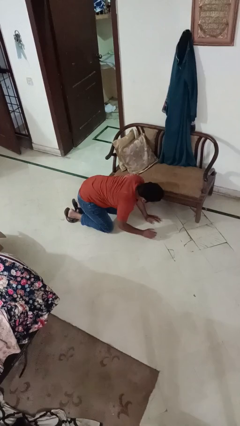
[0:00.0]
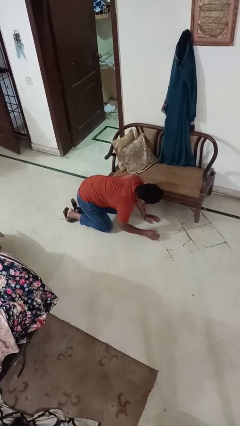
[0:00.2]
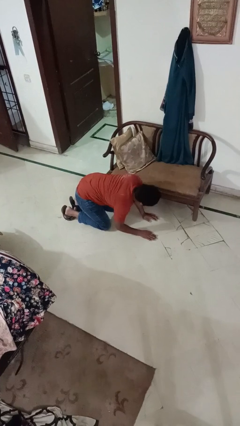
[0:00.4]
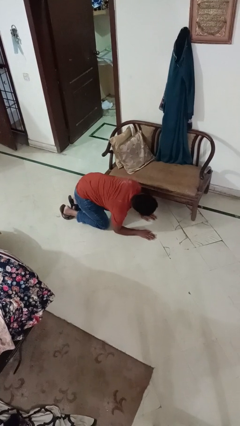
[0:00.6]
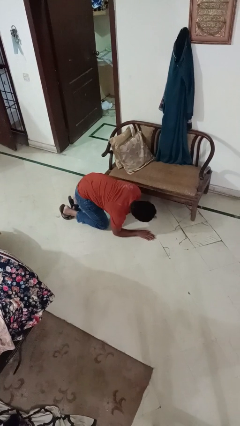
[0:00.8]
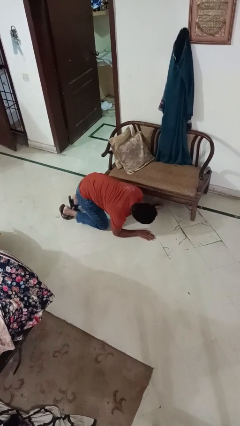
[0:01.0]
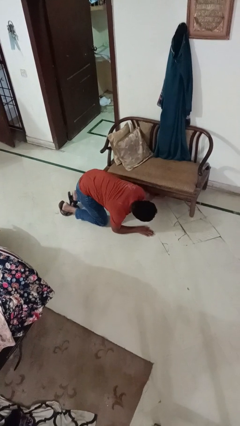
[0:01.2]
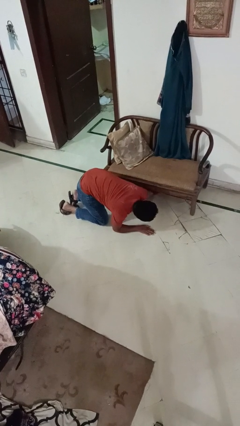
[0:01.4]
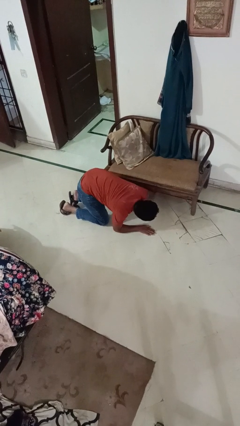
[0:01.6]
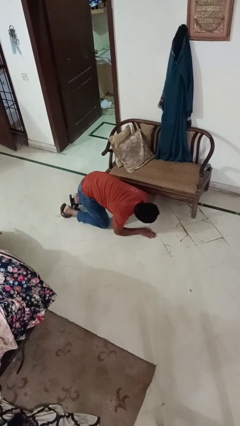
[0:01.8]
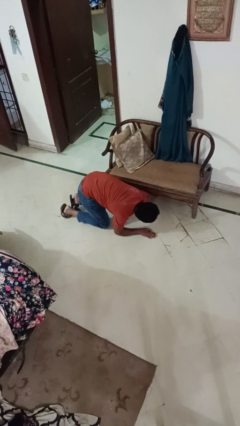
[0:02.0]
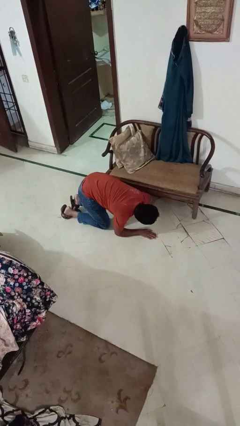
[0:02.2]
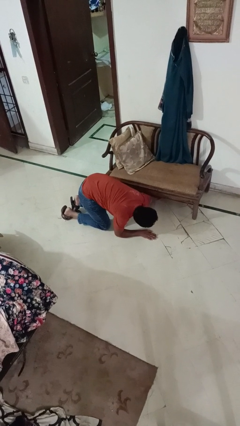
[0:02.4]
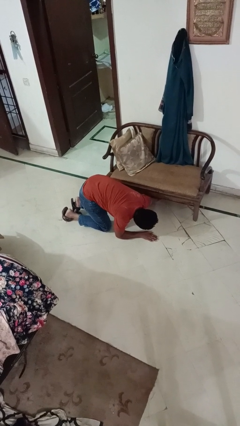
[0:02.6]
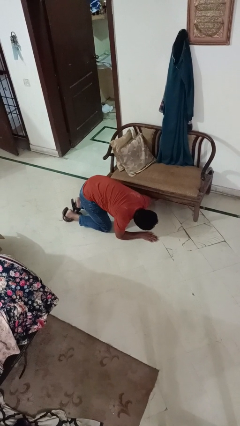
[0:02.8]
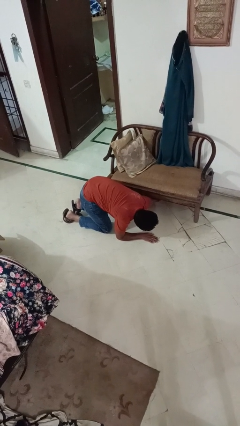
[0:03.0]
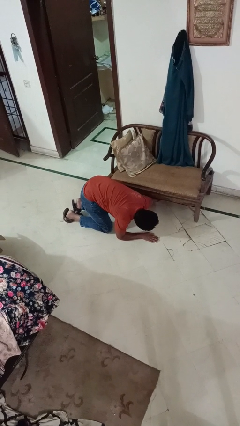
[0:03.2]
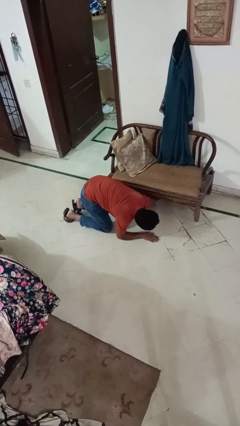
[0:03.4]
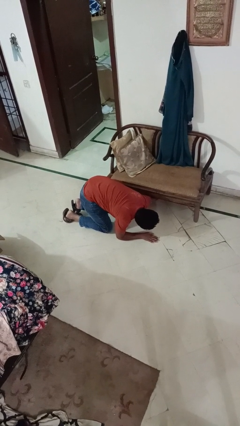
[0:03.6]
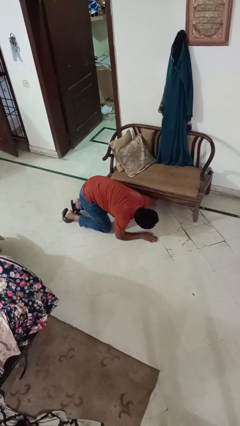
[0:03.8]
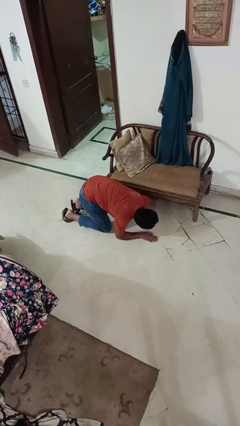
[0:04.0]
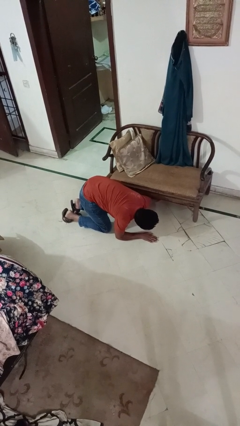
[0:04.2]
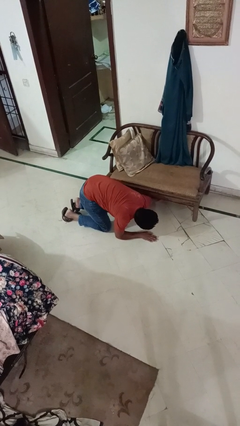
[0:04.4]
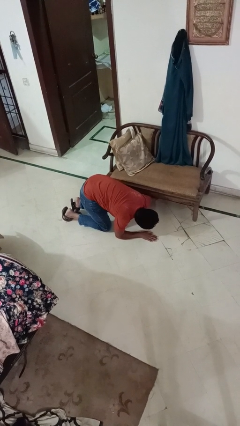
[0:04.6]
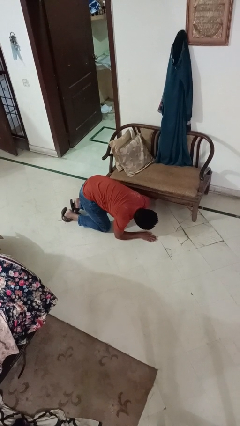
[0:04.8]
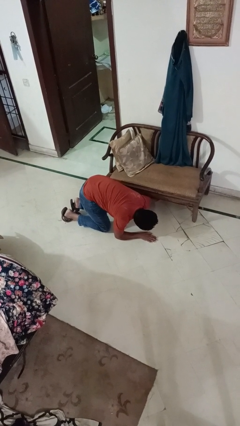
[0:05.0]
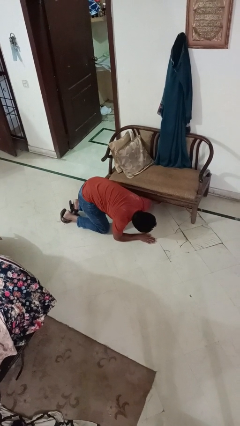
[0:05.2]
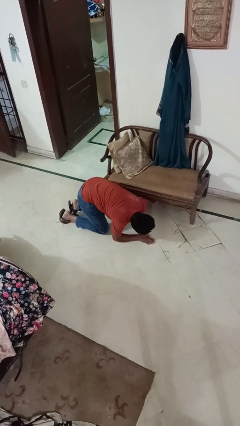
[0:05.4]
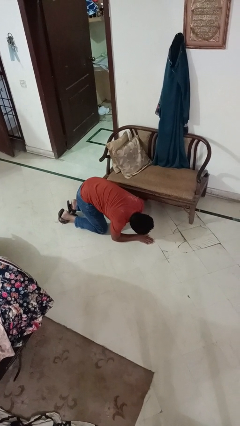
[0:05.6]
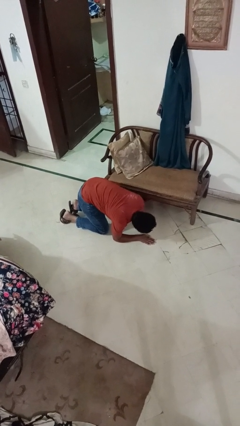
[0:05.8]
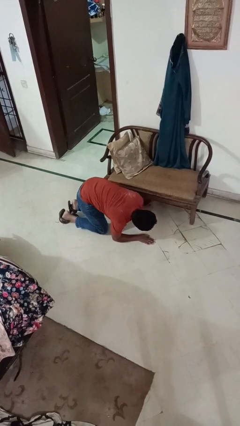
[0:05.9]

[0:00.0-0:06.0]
person searches under couch

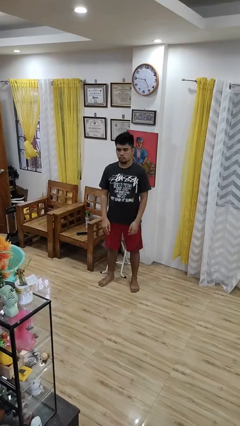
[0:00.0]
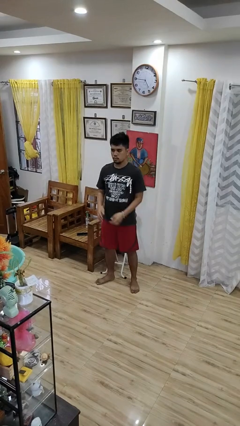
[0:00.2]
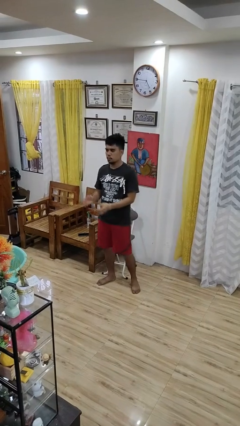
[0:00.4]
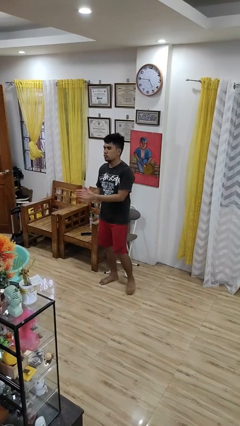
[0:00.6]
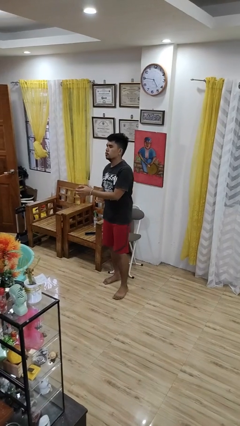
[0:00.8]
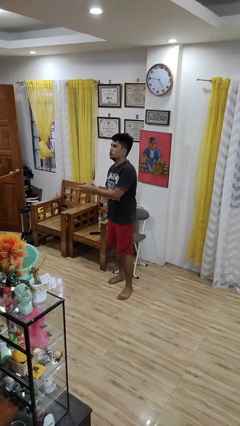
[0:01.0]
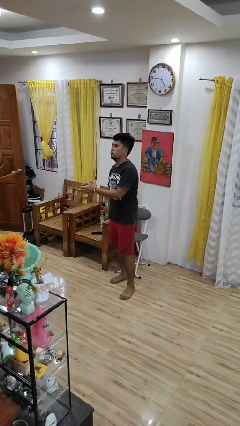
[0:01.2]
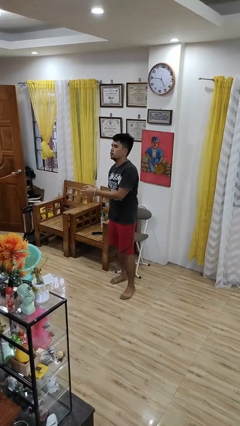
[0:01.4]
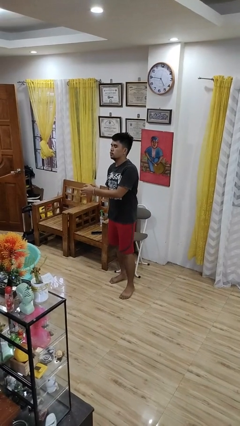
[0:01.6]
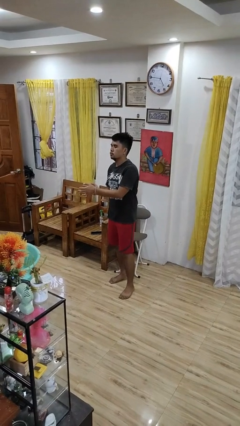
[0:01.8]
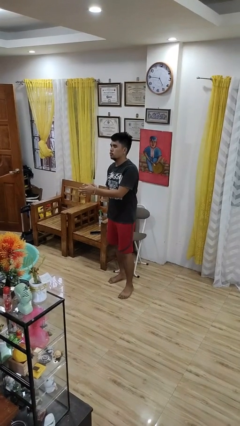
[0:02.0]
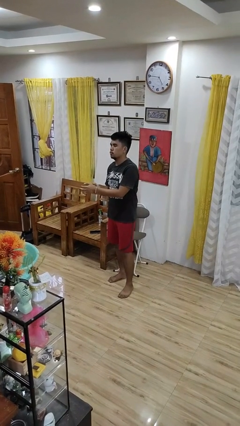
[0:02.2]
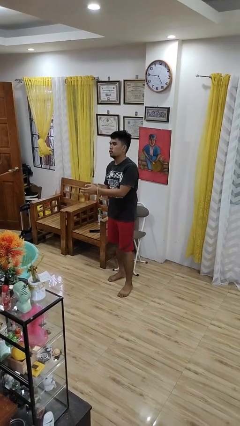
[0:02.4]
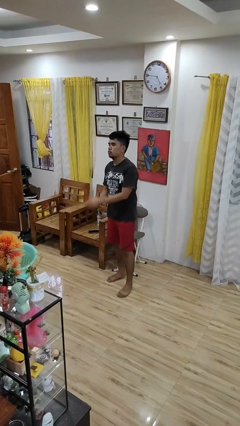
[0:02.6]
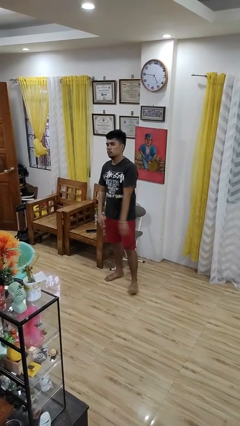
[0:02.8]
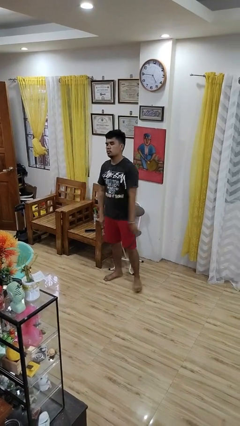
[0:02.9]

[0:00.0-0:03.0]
person claps hands

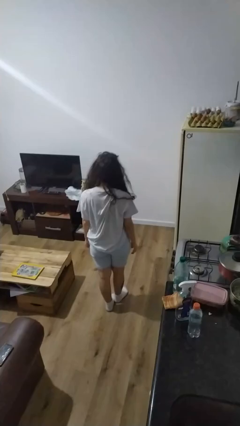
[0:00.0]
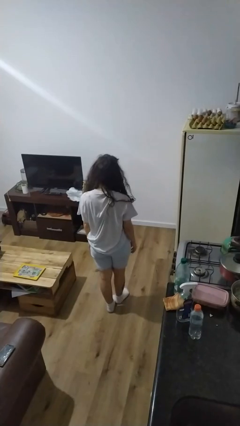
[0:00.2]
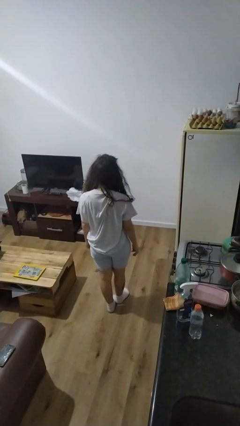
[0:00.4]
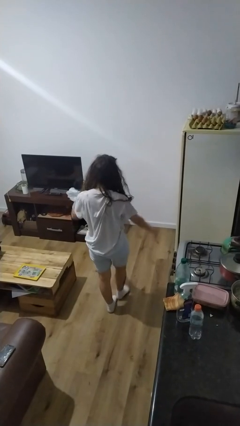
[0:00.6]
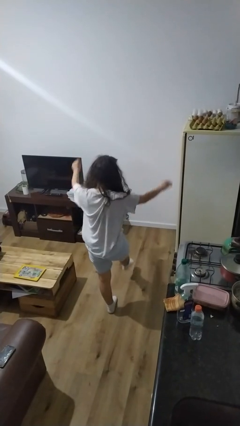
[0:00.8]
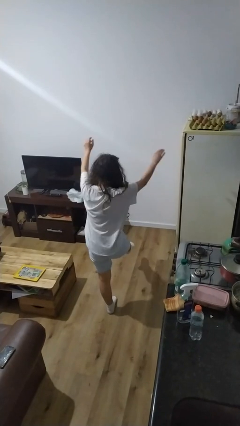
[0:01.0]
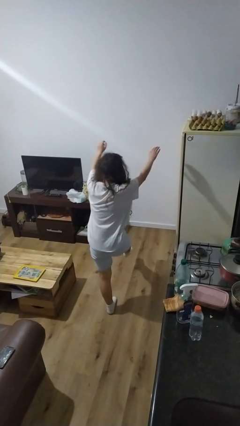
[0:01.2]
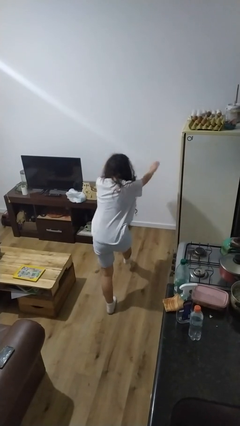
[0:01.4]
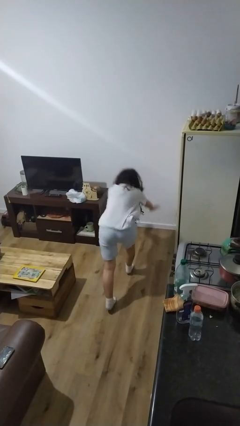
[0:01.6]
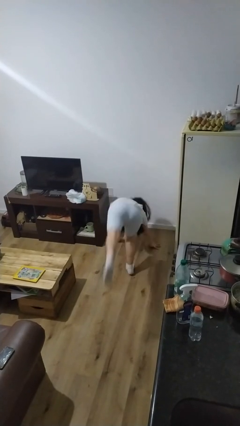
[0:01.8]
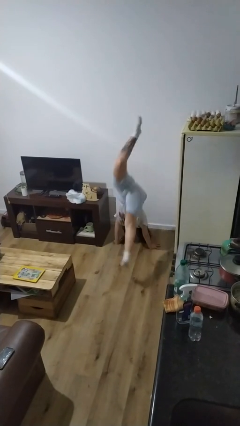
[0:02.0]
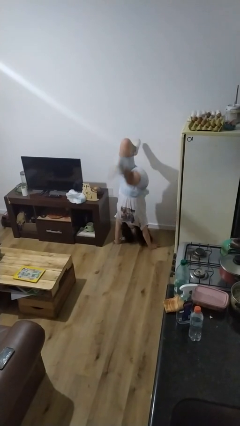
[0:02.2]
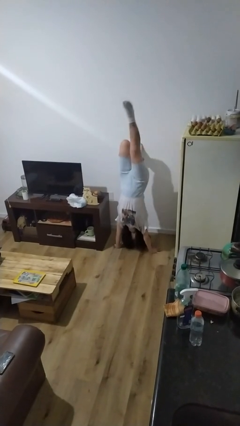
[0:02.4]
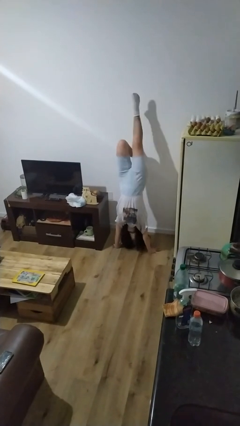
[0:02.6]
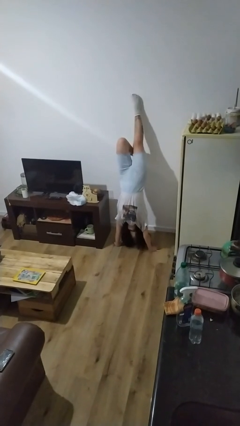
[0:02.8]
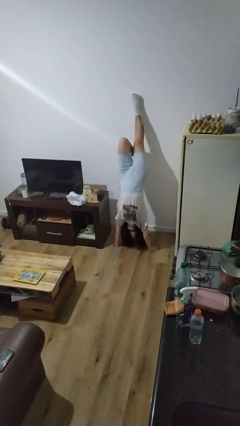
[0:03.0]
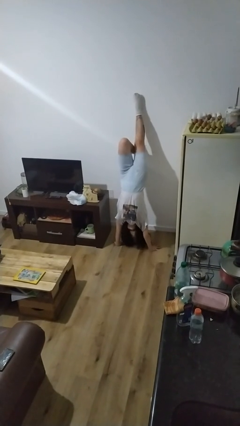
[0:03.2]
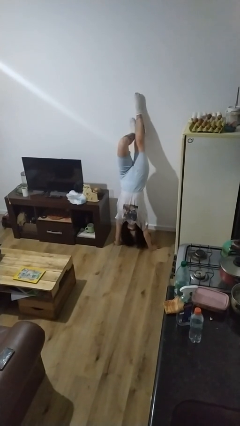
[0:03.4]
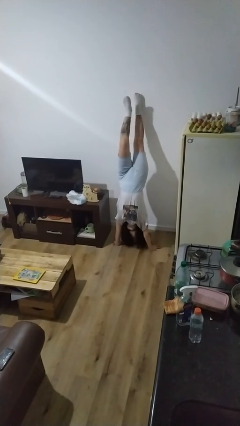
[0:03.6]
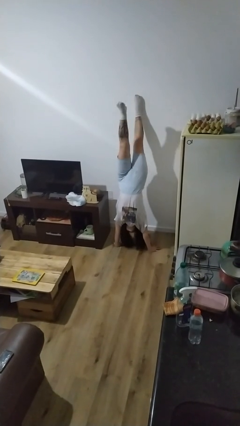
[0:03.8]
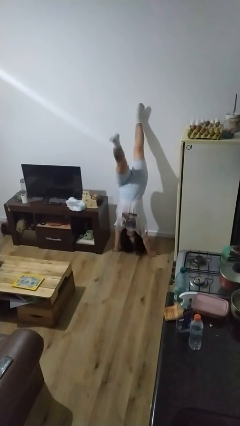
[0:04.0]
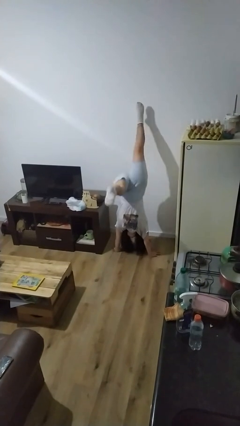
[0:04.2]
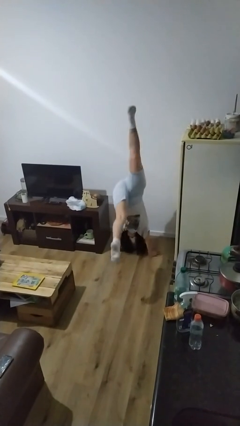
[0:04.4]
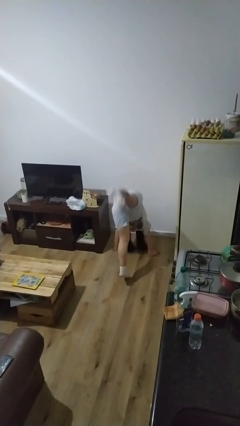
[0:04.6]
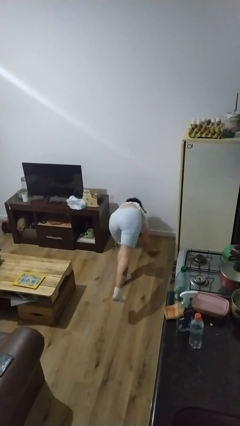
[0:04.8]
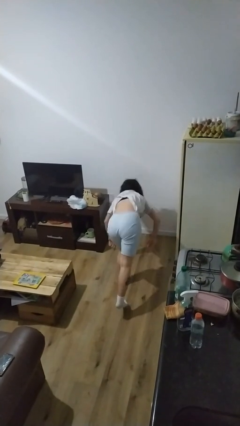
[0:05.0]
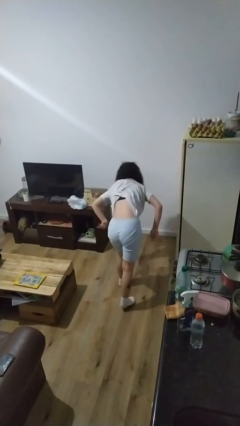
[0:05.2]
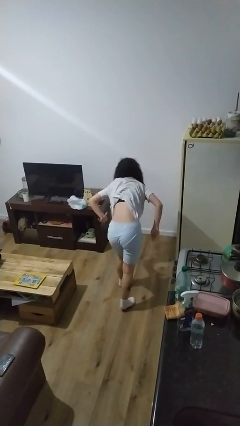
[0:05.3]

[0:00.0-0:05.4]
person handstand

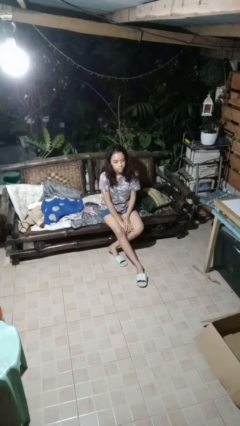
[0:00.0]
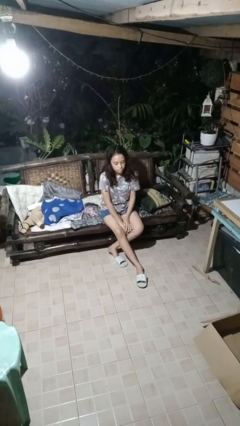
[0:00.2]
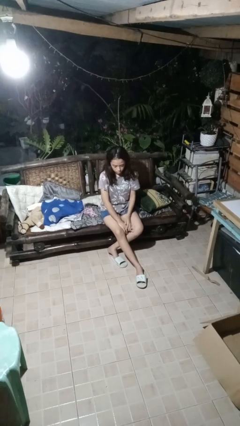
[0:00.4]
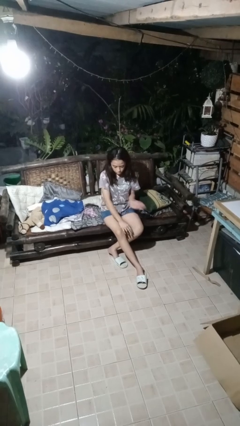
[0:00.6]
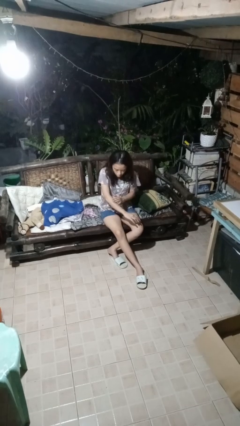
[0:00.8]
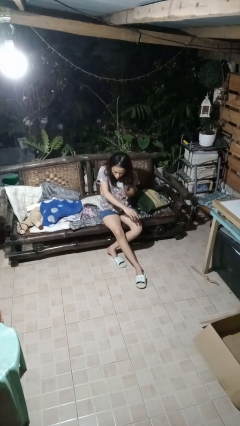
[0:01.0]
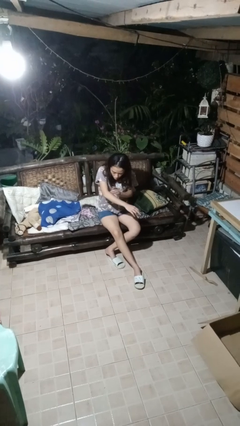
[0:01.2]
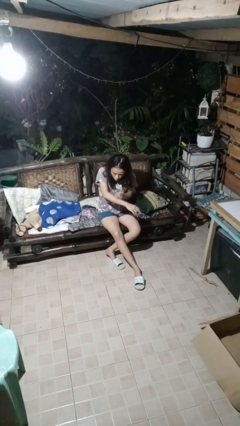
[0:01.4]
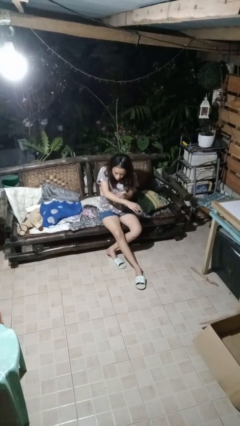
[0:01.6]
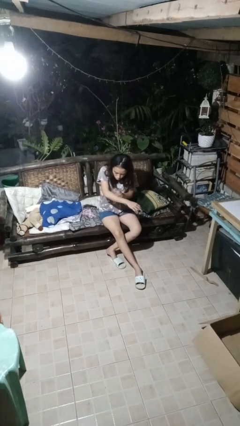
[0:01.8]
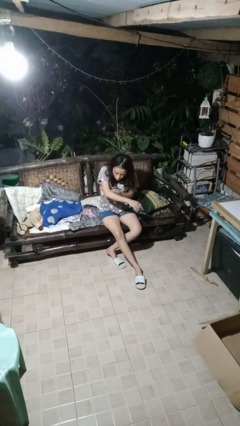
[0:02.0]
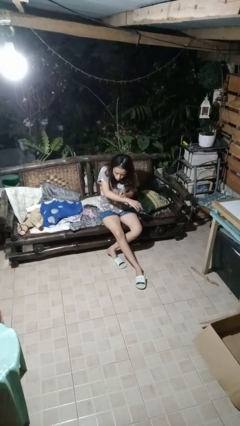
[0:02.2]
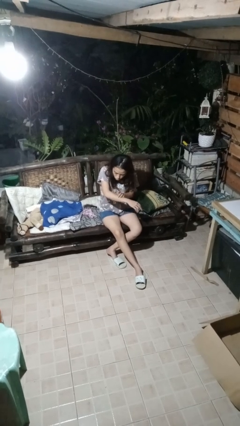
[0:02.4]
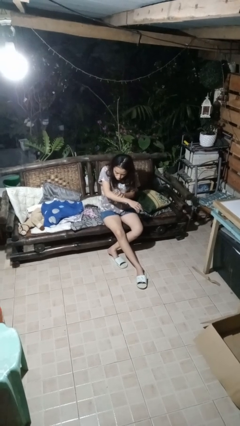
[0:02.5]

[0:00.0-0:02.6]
person swats bug

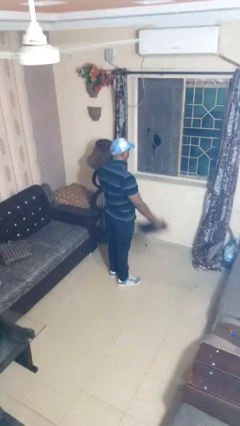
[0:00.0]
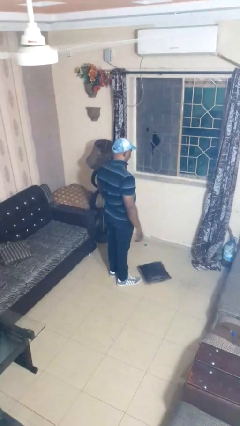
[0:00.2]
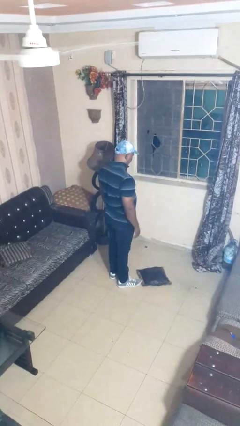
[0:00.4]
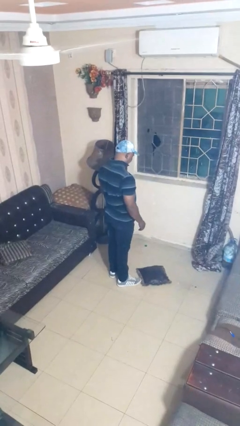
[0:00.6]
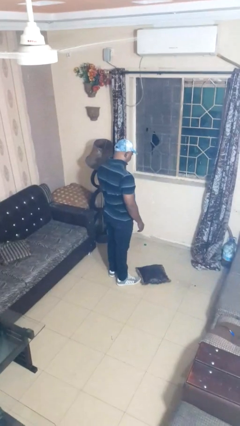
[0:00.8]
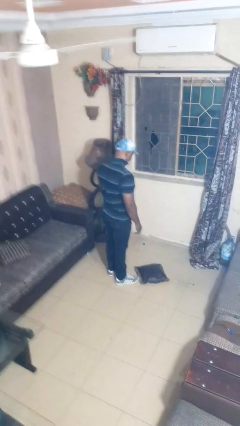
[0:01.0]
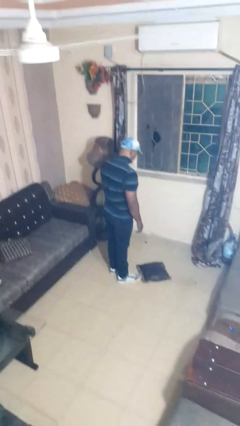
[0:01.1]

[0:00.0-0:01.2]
person catches dropped object
